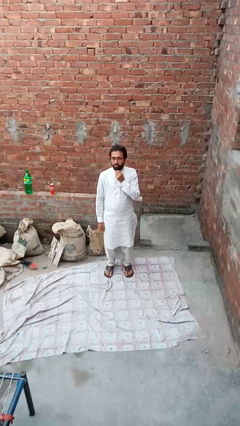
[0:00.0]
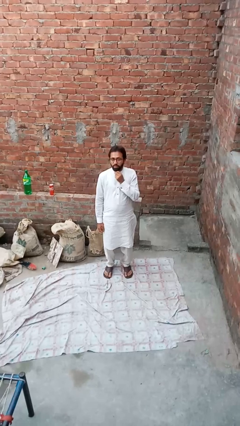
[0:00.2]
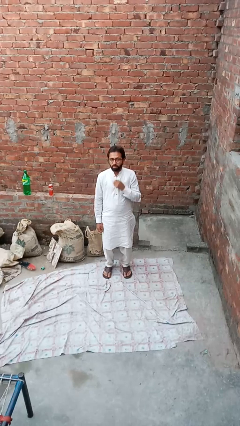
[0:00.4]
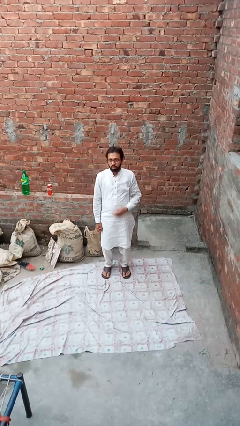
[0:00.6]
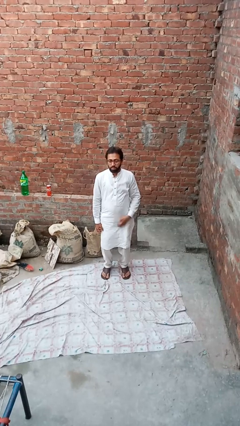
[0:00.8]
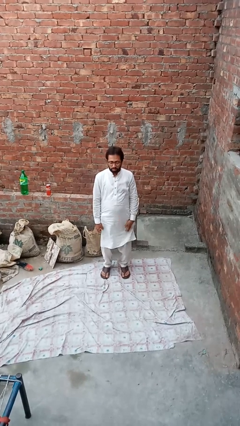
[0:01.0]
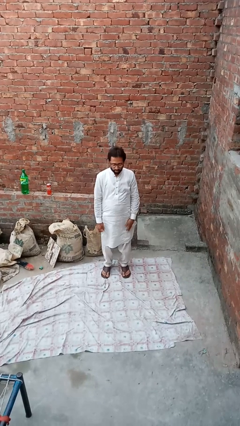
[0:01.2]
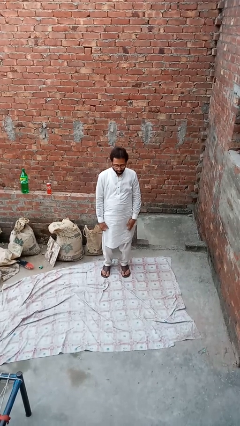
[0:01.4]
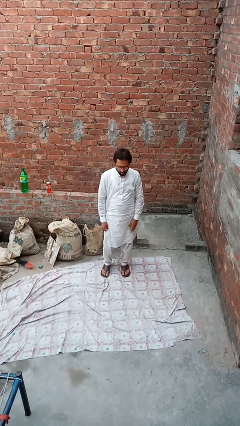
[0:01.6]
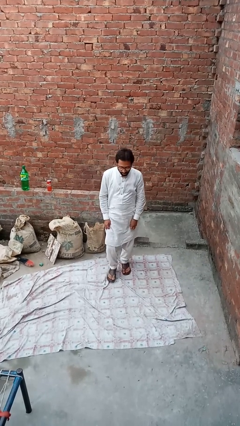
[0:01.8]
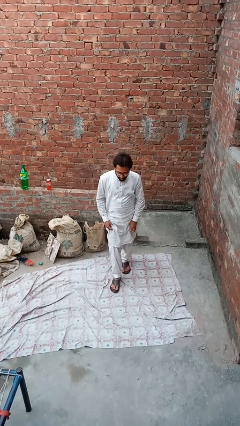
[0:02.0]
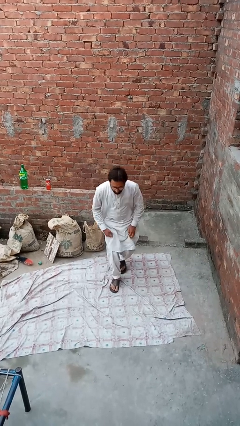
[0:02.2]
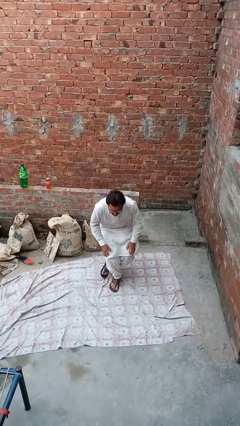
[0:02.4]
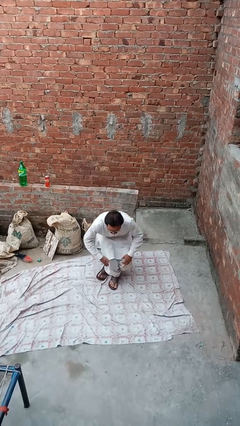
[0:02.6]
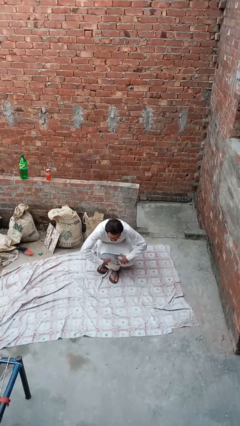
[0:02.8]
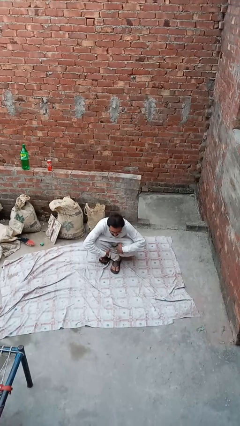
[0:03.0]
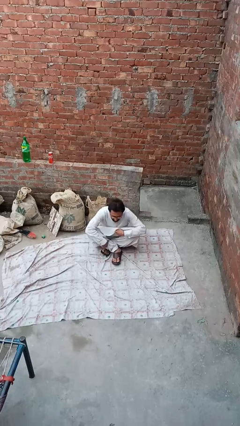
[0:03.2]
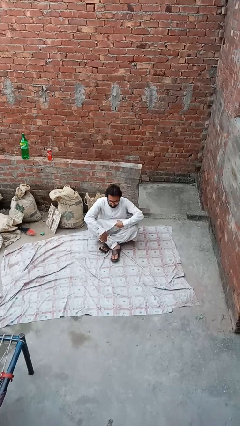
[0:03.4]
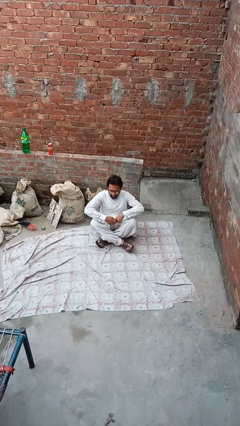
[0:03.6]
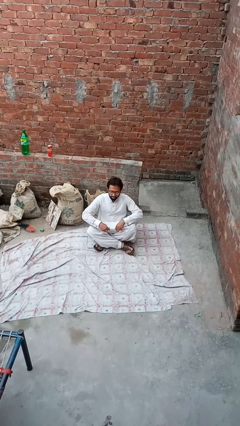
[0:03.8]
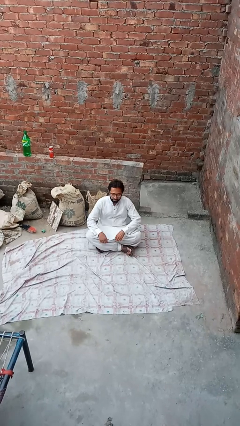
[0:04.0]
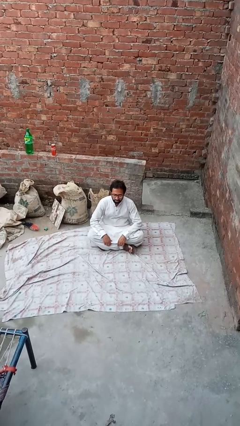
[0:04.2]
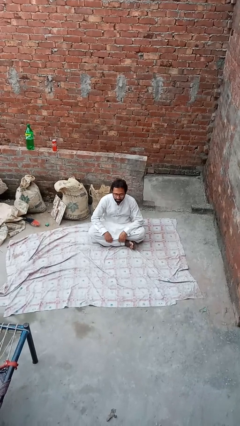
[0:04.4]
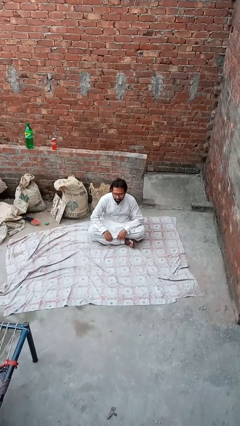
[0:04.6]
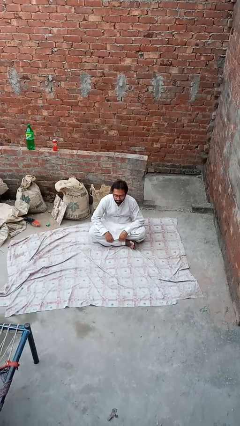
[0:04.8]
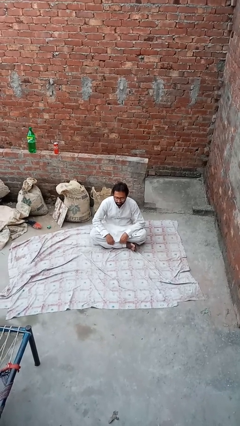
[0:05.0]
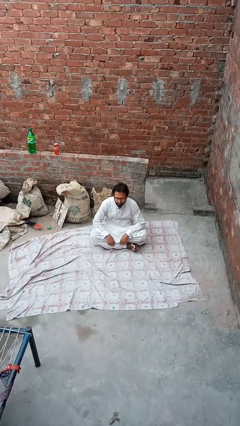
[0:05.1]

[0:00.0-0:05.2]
person sits crisscross

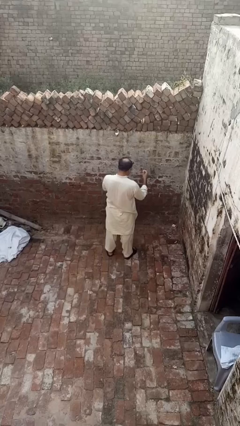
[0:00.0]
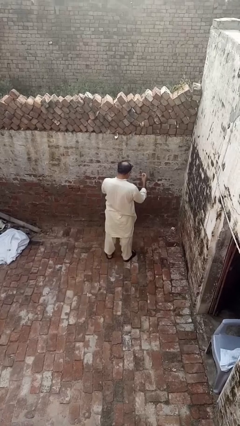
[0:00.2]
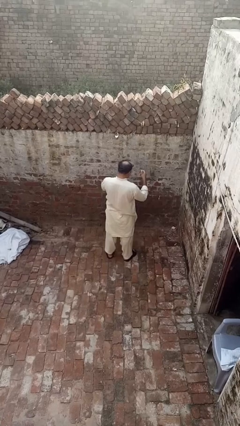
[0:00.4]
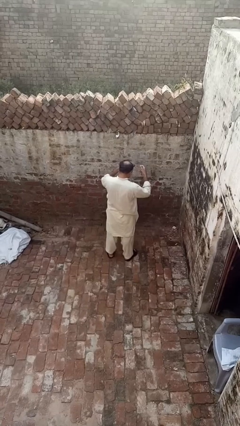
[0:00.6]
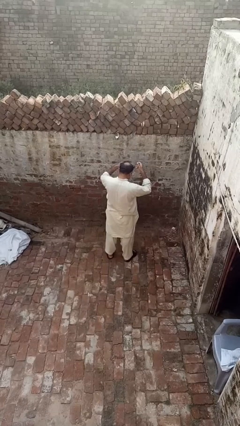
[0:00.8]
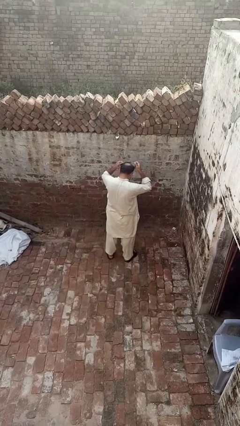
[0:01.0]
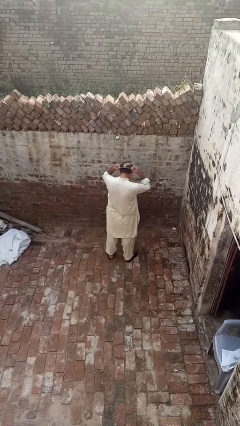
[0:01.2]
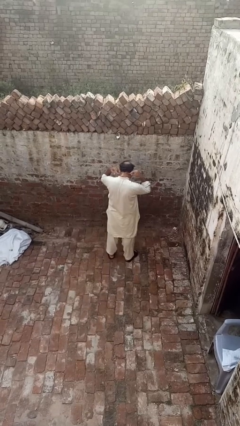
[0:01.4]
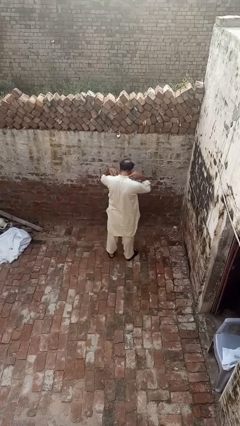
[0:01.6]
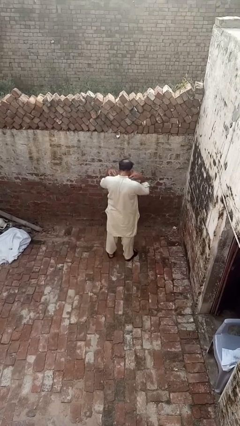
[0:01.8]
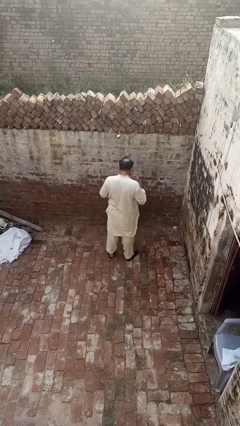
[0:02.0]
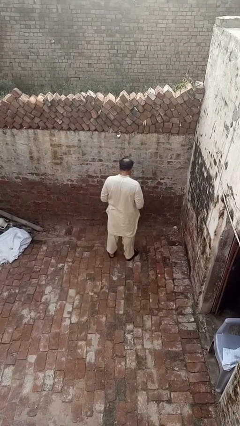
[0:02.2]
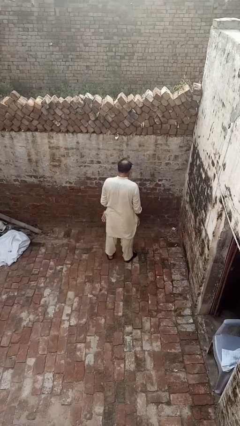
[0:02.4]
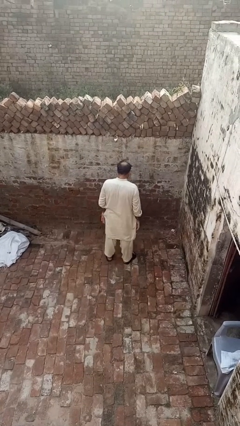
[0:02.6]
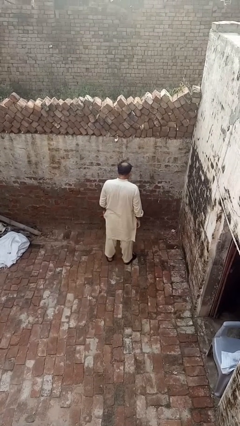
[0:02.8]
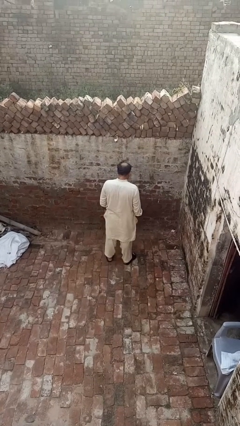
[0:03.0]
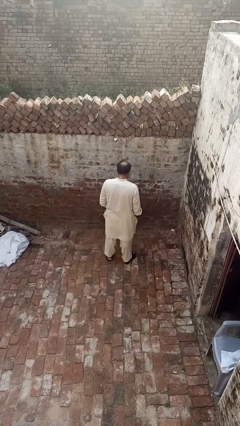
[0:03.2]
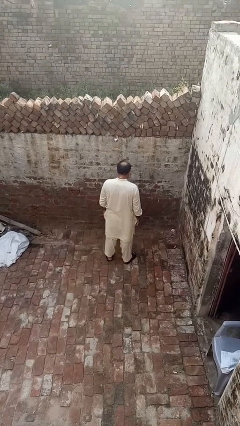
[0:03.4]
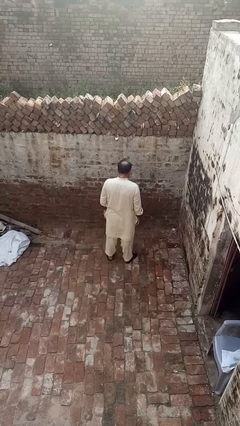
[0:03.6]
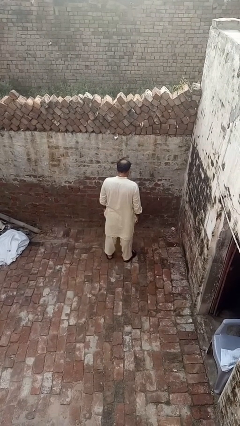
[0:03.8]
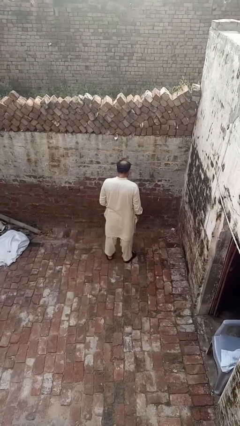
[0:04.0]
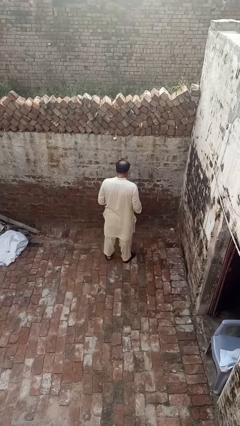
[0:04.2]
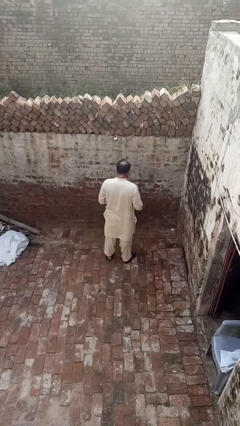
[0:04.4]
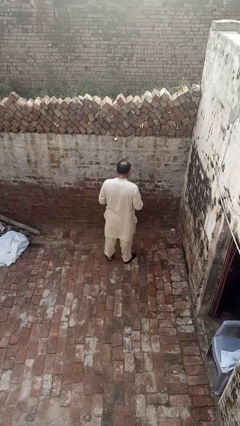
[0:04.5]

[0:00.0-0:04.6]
person puts on necklace

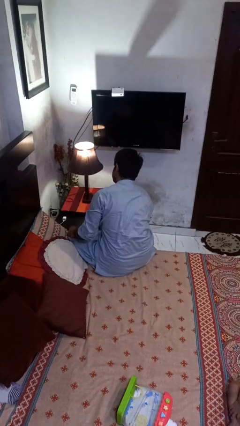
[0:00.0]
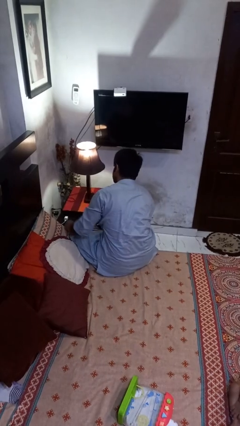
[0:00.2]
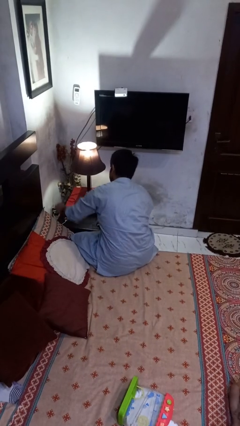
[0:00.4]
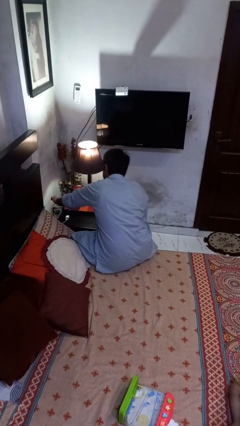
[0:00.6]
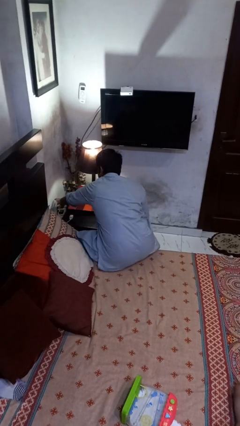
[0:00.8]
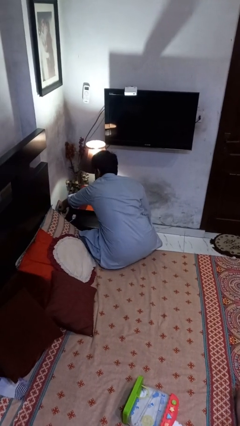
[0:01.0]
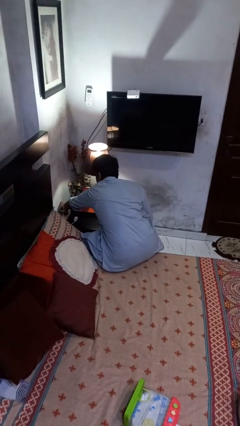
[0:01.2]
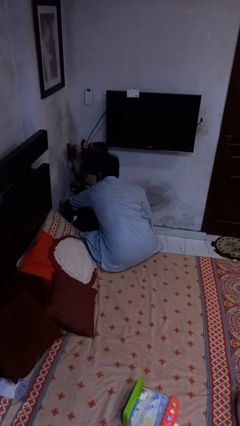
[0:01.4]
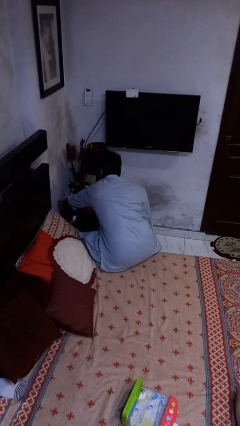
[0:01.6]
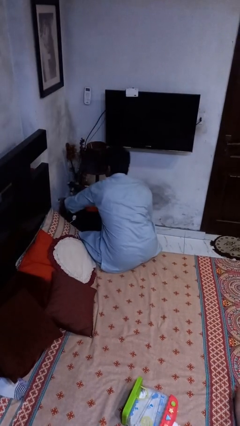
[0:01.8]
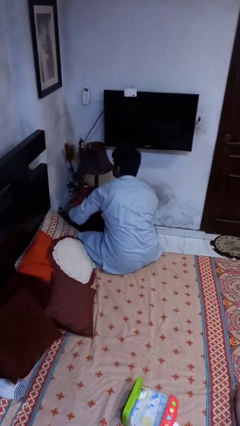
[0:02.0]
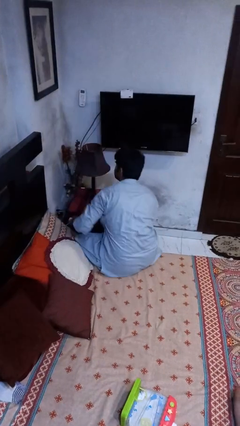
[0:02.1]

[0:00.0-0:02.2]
person turns off lamp

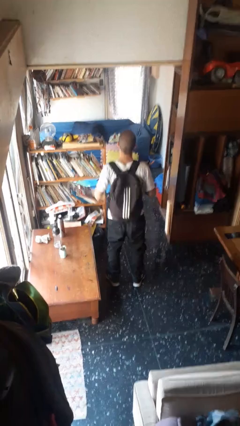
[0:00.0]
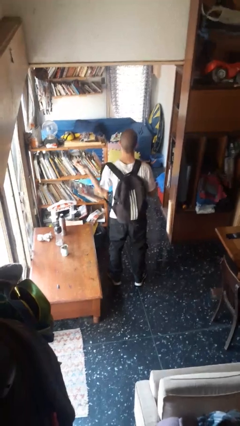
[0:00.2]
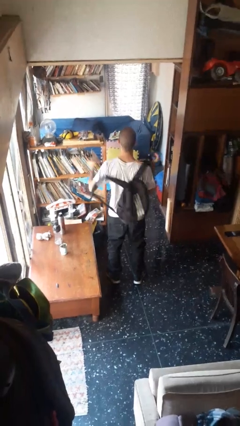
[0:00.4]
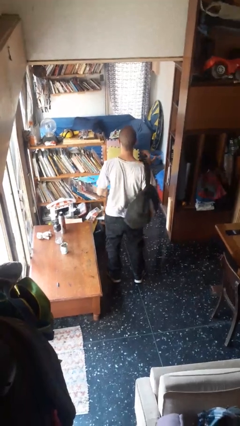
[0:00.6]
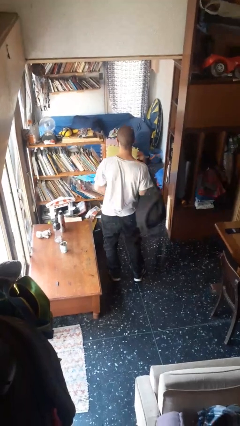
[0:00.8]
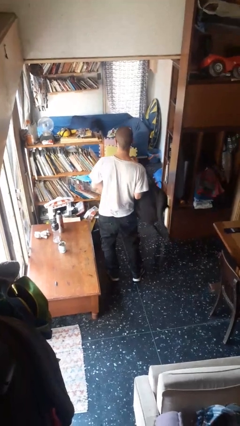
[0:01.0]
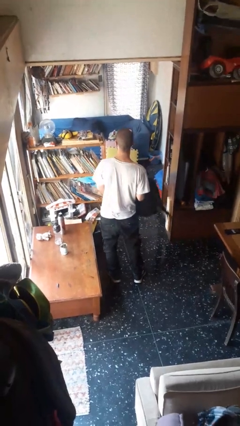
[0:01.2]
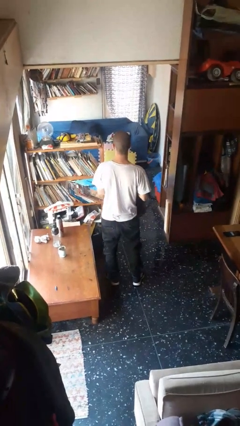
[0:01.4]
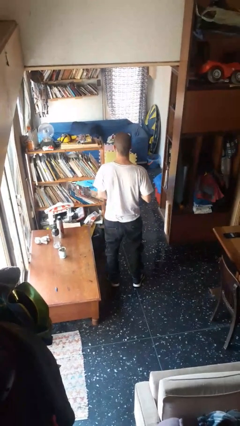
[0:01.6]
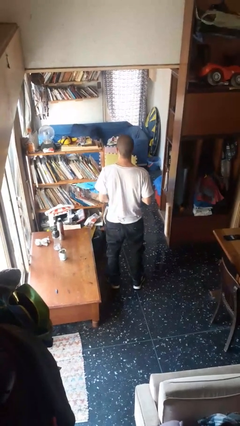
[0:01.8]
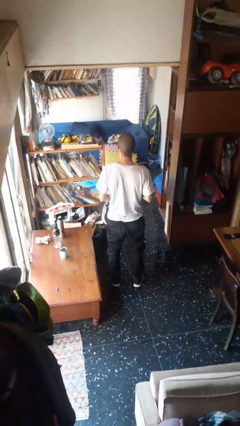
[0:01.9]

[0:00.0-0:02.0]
person takes off backpack

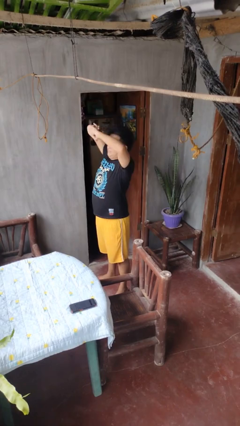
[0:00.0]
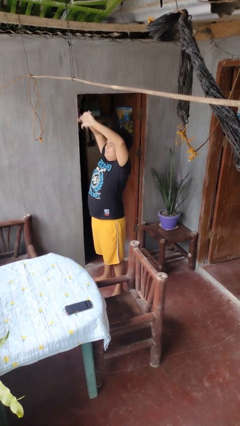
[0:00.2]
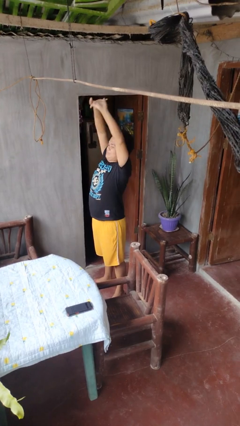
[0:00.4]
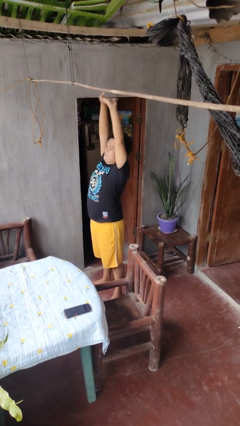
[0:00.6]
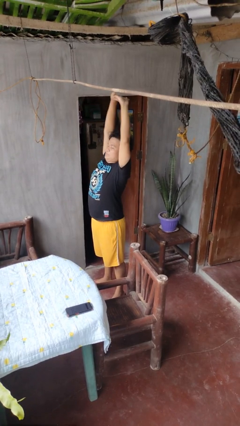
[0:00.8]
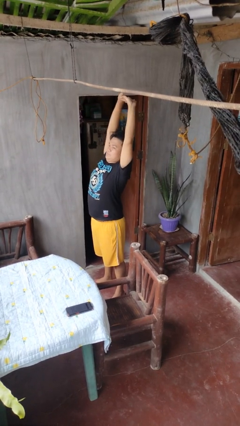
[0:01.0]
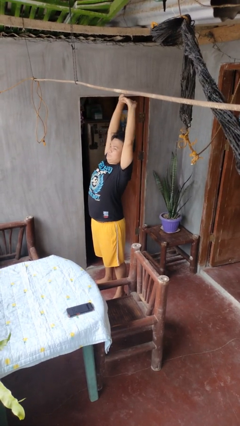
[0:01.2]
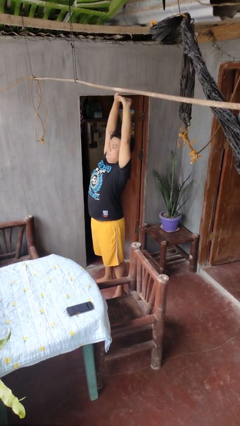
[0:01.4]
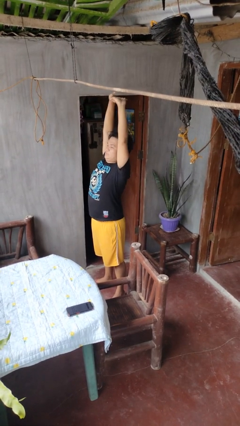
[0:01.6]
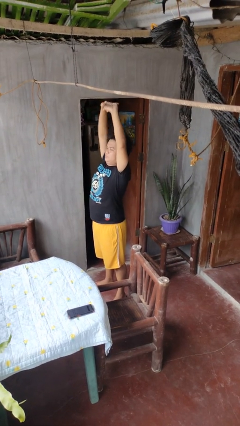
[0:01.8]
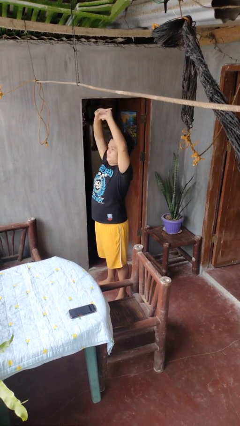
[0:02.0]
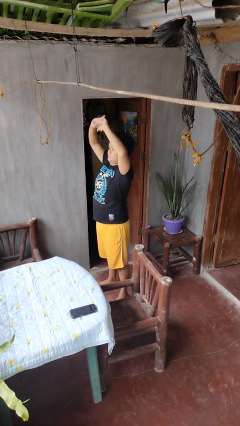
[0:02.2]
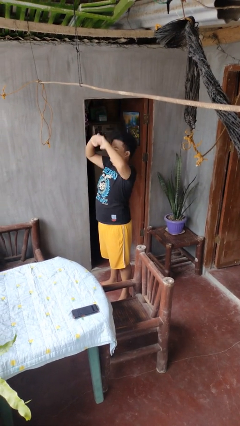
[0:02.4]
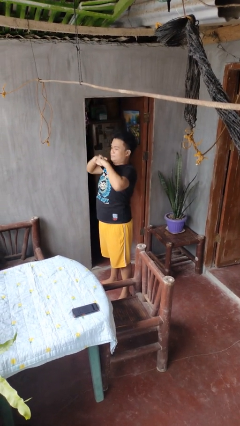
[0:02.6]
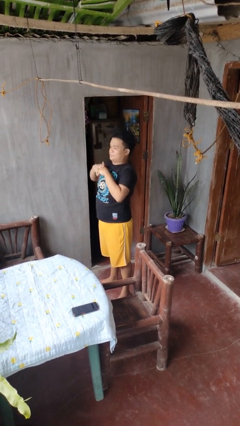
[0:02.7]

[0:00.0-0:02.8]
person stretches arms over head

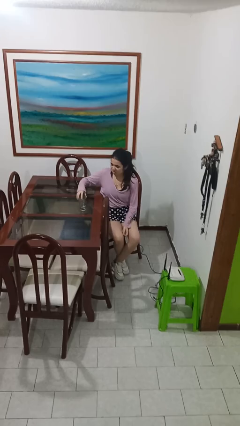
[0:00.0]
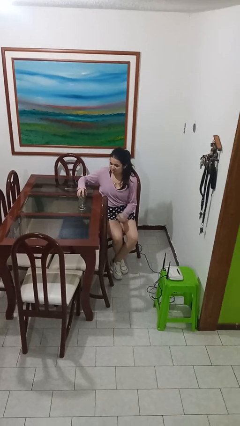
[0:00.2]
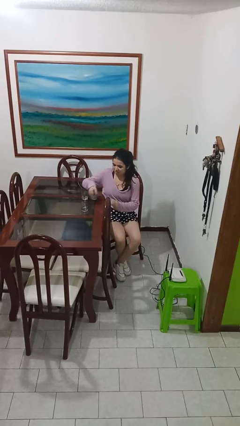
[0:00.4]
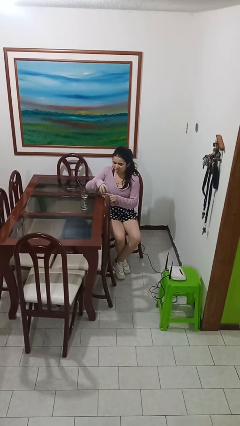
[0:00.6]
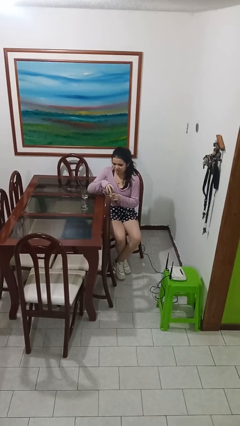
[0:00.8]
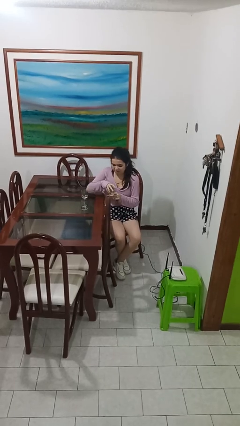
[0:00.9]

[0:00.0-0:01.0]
person picks up object from table
